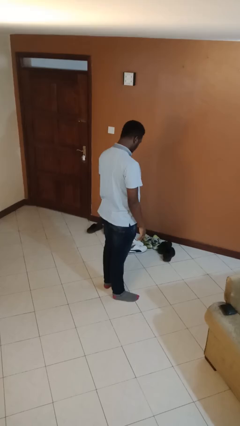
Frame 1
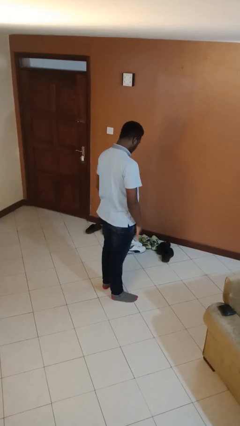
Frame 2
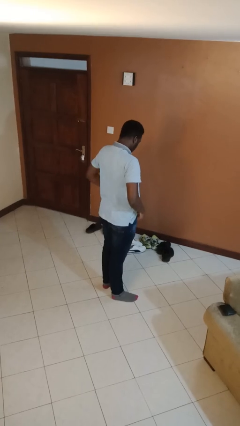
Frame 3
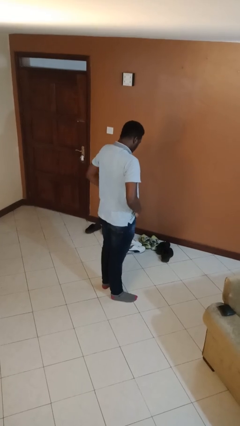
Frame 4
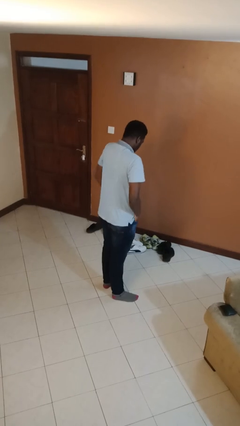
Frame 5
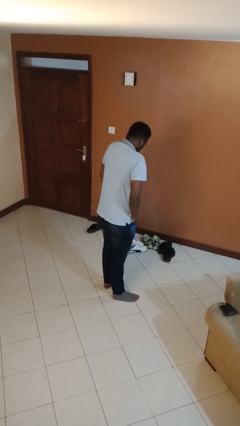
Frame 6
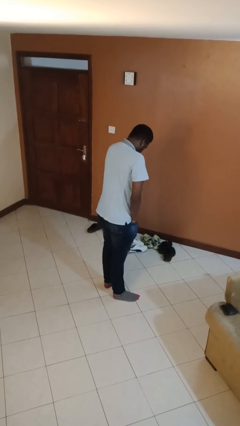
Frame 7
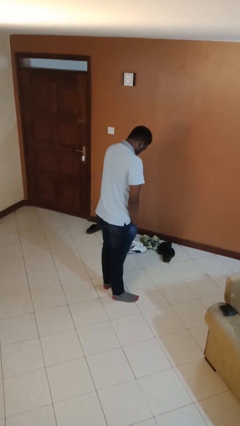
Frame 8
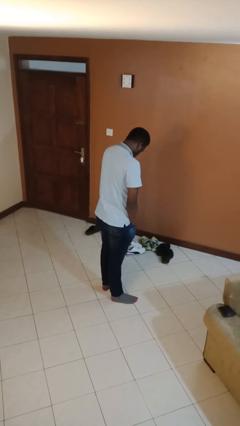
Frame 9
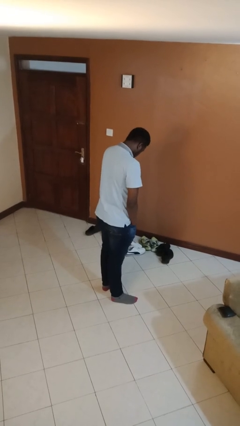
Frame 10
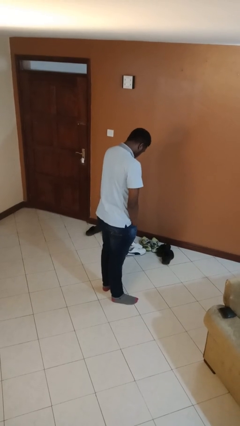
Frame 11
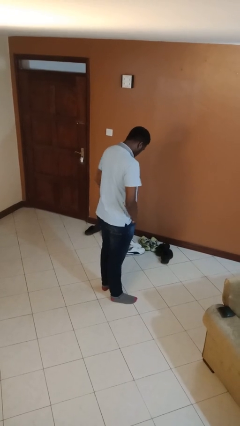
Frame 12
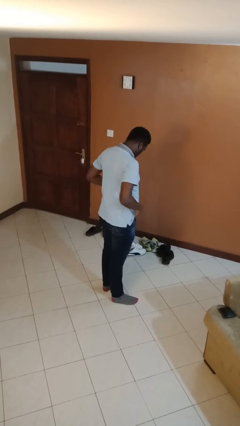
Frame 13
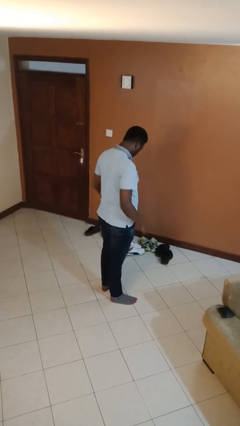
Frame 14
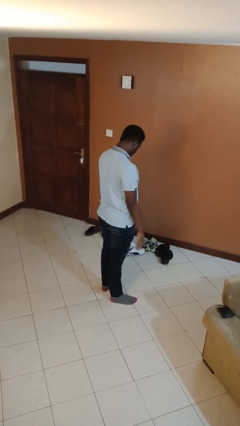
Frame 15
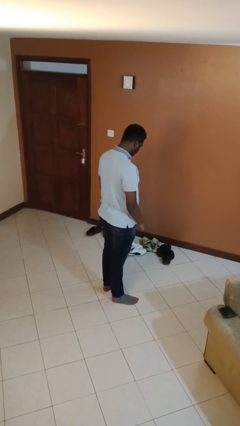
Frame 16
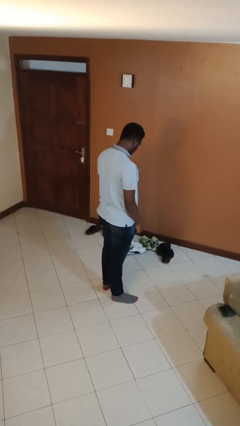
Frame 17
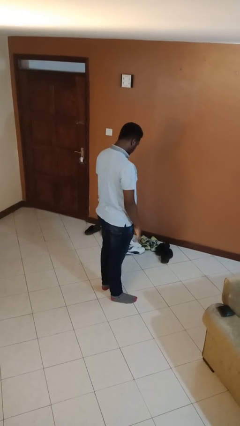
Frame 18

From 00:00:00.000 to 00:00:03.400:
person puts hands in back pockets

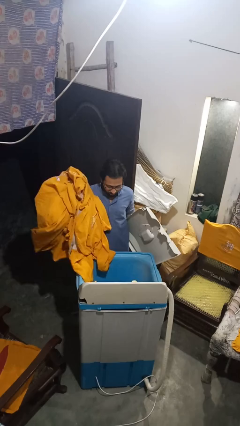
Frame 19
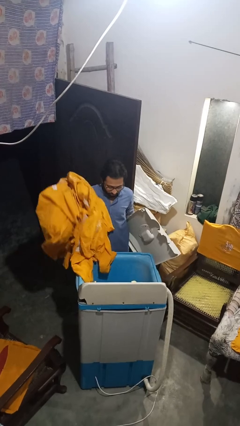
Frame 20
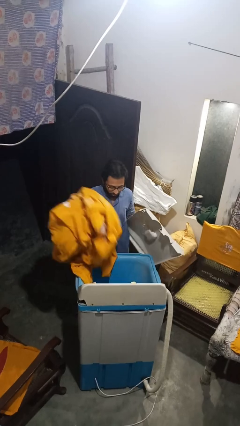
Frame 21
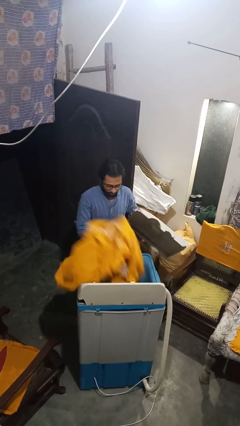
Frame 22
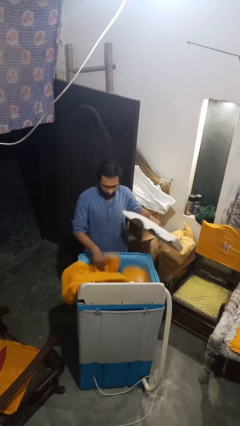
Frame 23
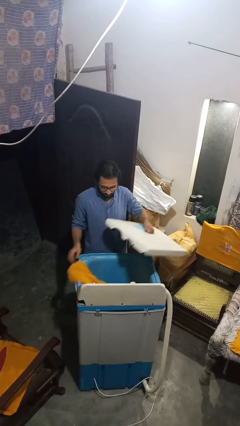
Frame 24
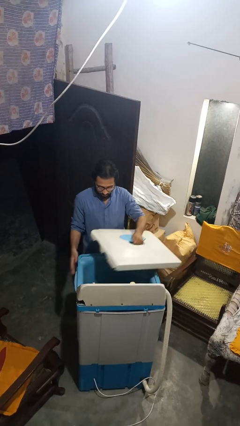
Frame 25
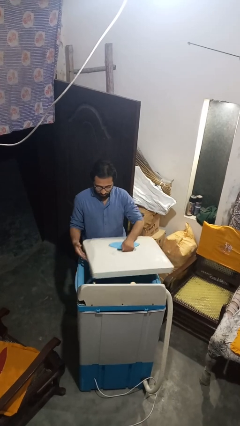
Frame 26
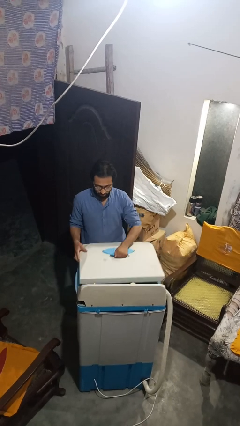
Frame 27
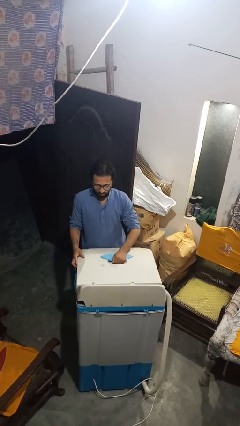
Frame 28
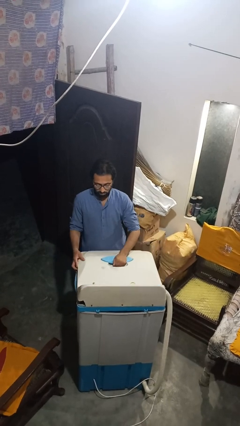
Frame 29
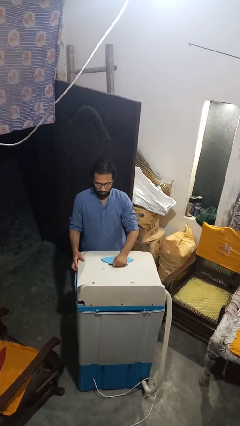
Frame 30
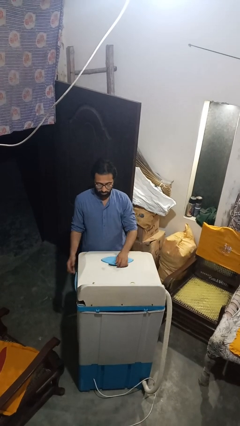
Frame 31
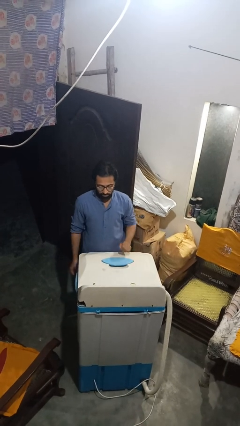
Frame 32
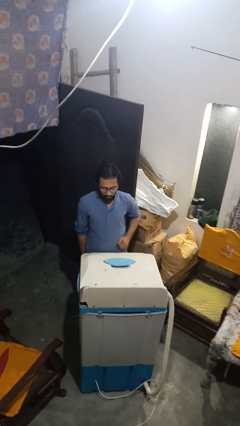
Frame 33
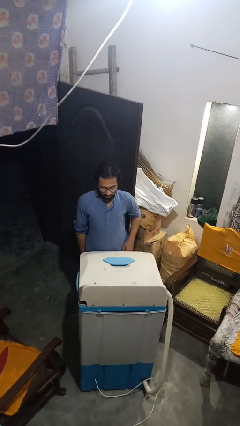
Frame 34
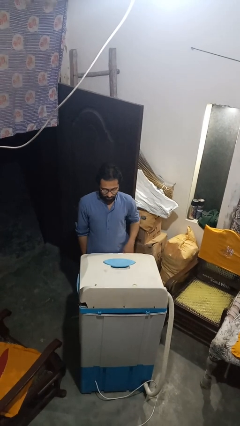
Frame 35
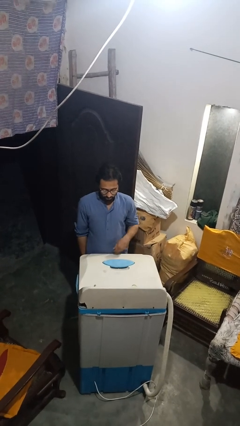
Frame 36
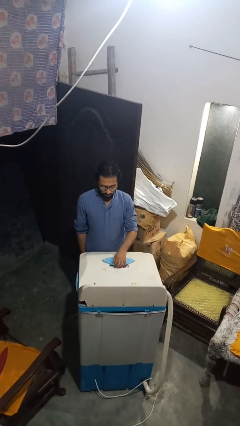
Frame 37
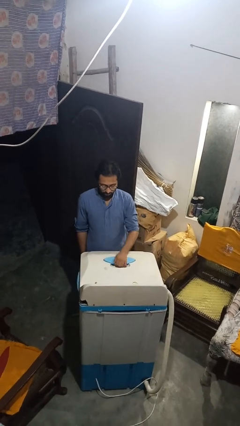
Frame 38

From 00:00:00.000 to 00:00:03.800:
person closes clothes washer

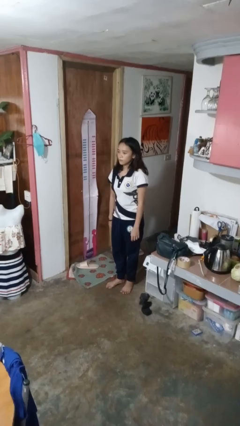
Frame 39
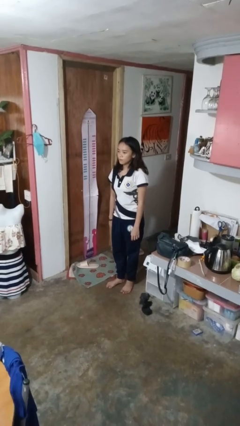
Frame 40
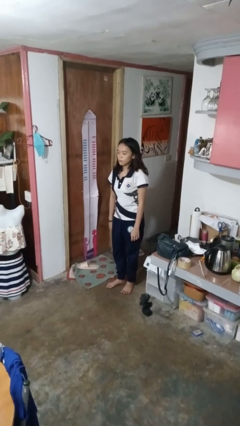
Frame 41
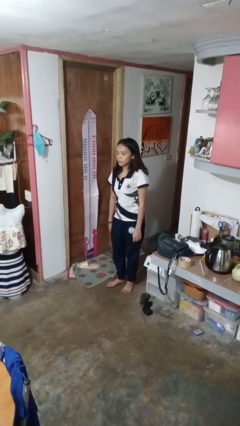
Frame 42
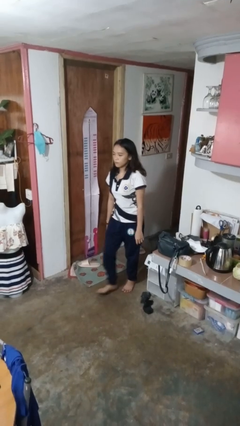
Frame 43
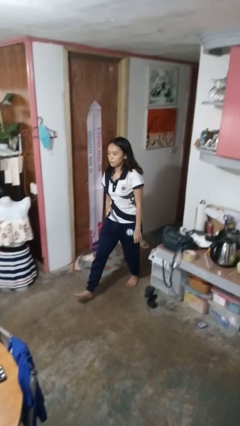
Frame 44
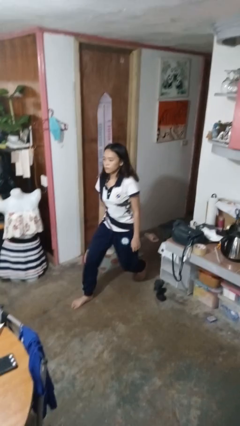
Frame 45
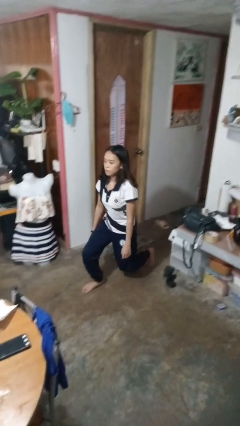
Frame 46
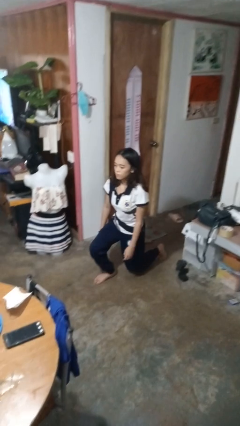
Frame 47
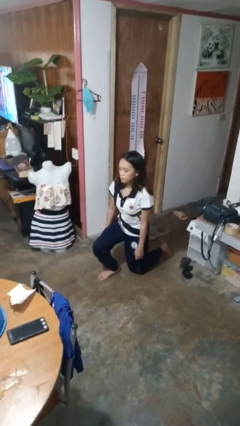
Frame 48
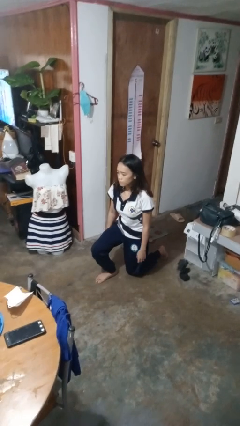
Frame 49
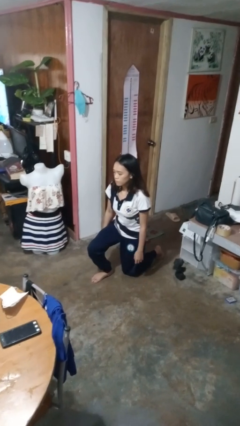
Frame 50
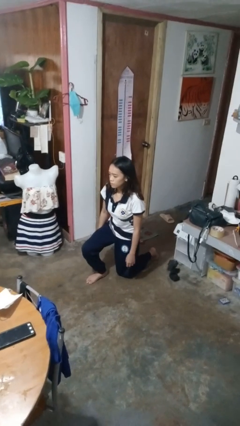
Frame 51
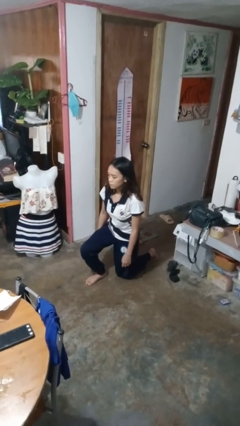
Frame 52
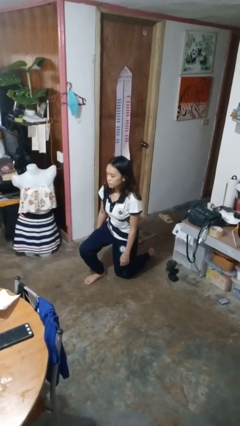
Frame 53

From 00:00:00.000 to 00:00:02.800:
person kneels

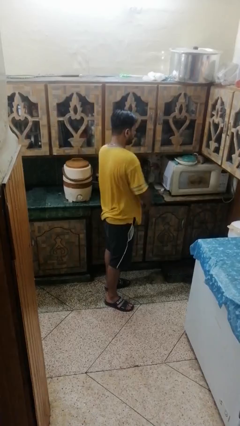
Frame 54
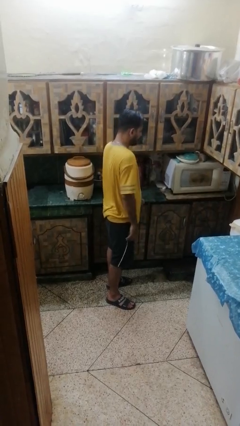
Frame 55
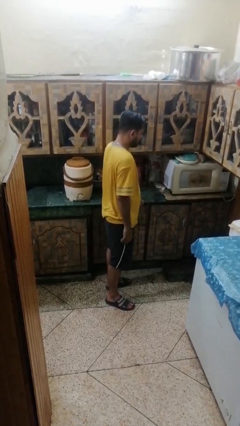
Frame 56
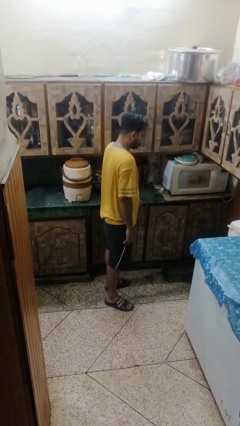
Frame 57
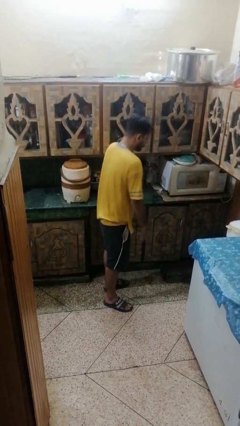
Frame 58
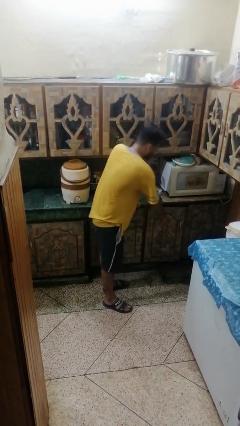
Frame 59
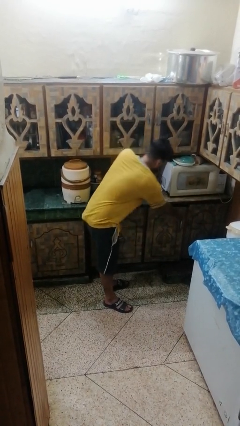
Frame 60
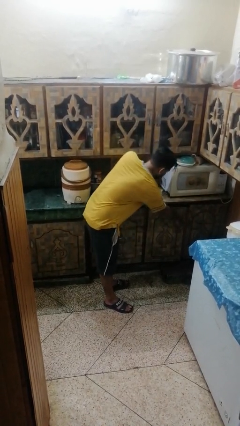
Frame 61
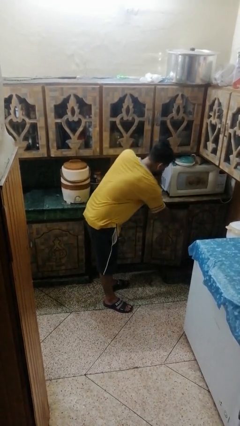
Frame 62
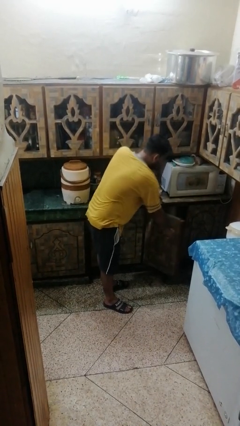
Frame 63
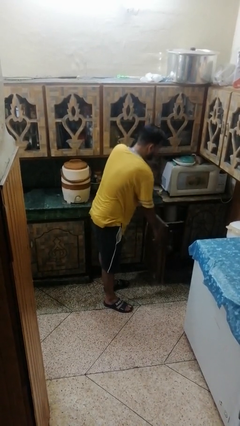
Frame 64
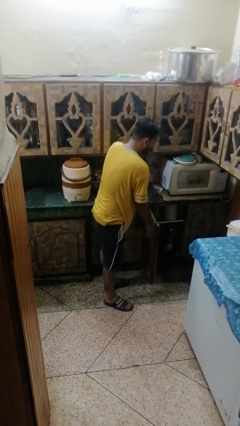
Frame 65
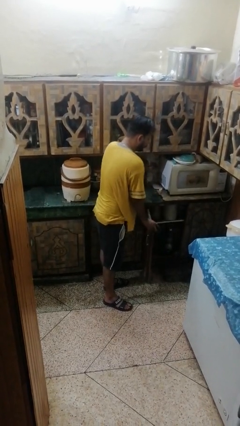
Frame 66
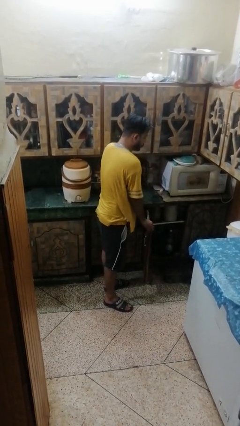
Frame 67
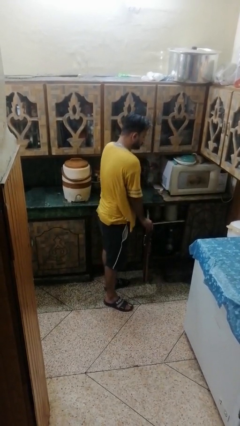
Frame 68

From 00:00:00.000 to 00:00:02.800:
person closes cabinet

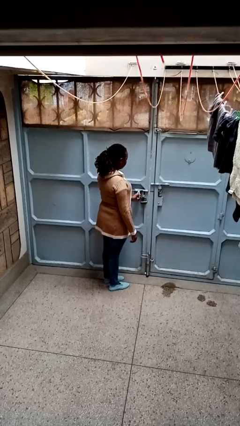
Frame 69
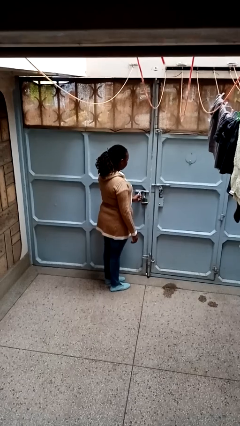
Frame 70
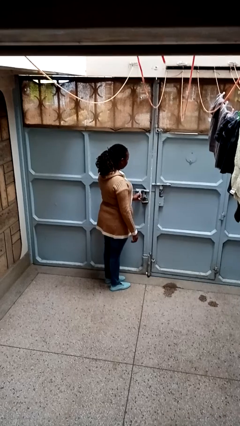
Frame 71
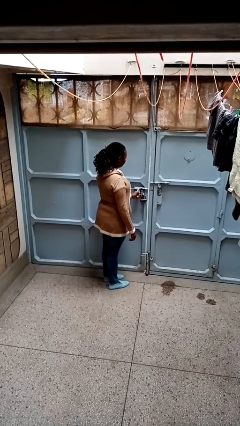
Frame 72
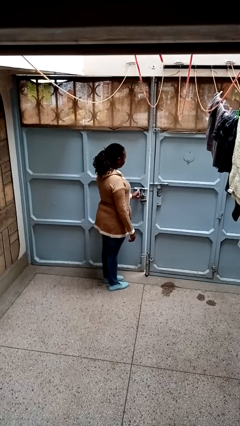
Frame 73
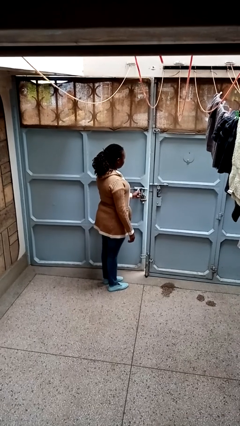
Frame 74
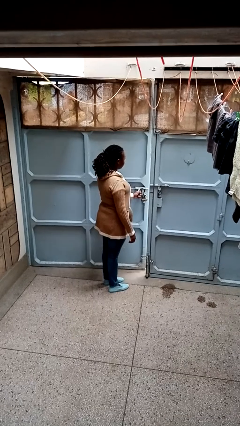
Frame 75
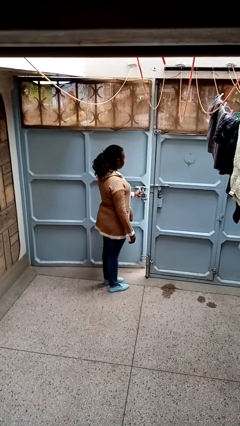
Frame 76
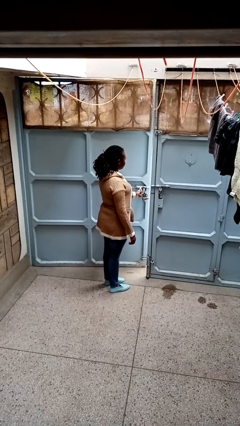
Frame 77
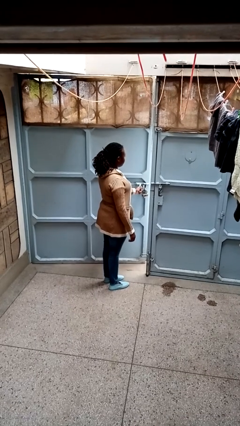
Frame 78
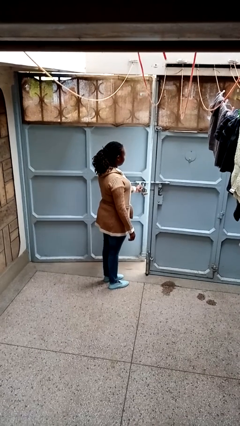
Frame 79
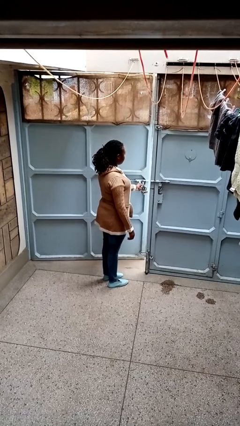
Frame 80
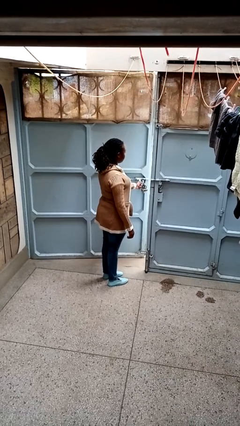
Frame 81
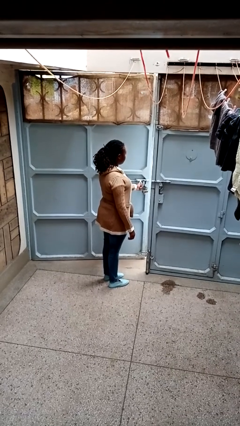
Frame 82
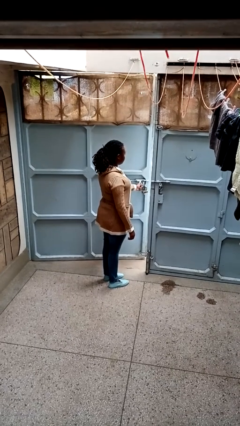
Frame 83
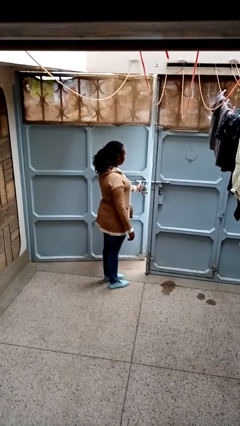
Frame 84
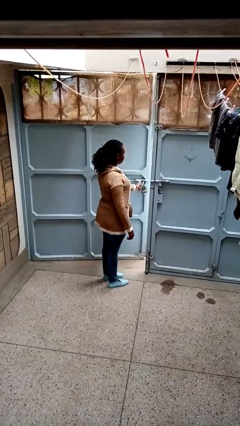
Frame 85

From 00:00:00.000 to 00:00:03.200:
person opens gate

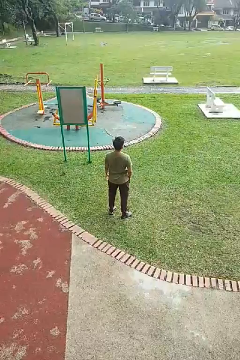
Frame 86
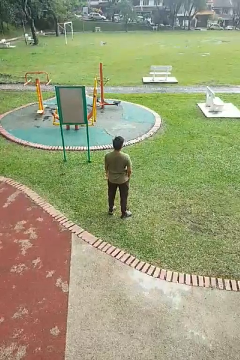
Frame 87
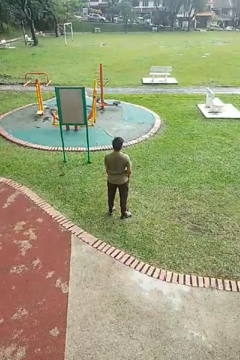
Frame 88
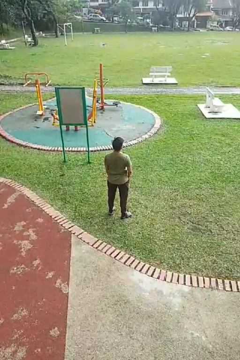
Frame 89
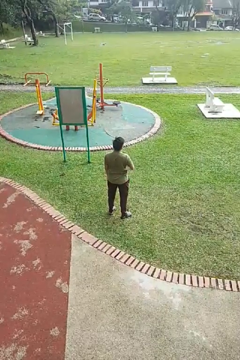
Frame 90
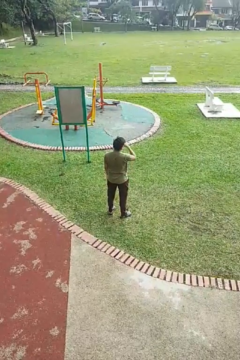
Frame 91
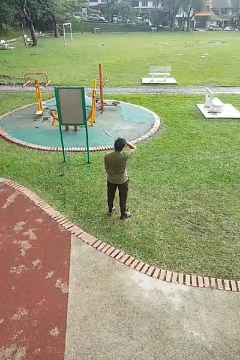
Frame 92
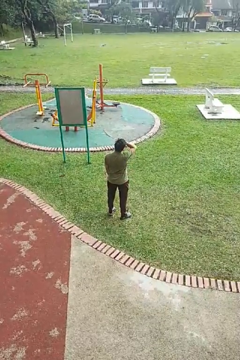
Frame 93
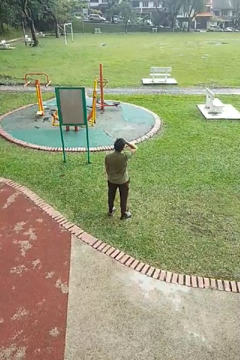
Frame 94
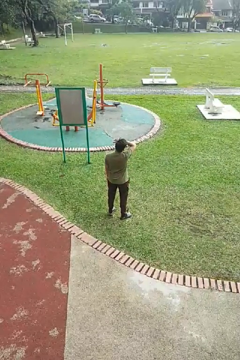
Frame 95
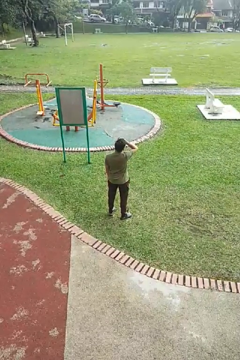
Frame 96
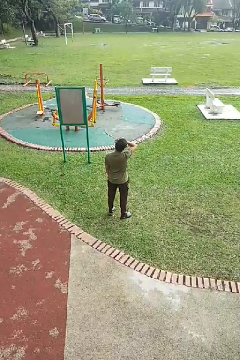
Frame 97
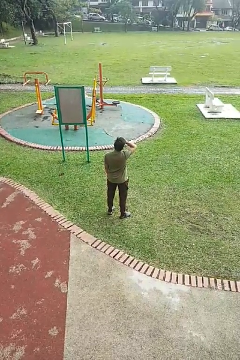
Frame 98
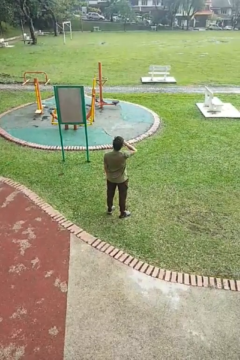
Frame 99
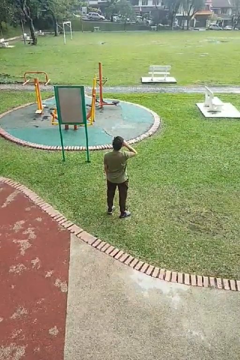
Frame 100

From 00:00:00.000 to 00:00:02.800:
person rubs eyes
